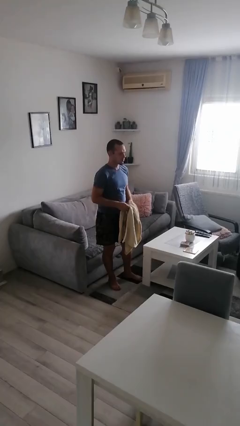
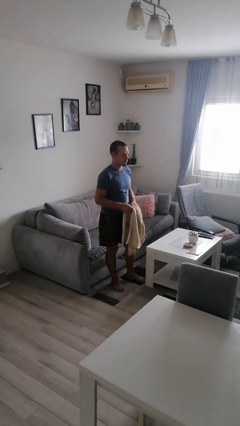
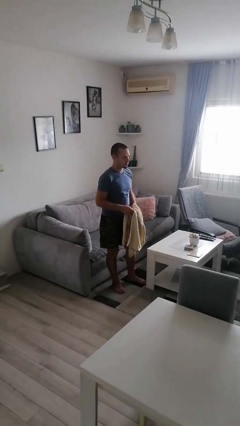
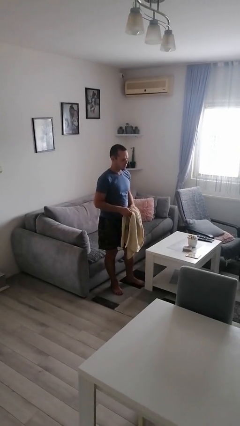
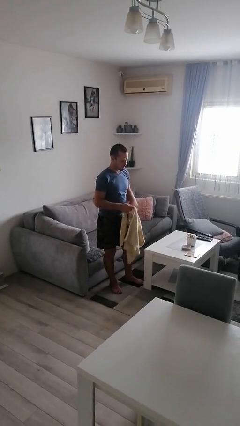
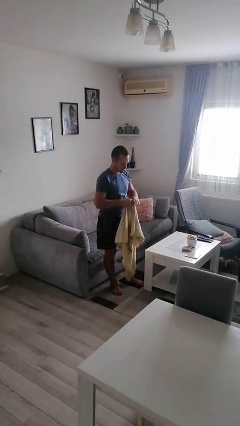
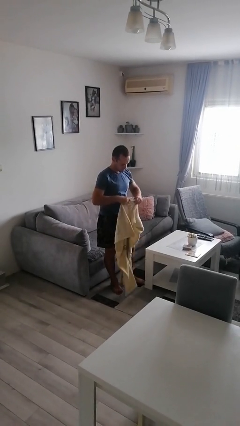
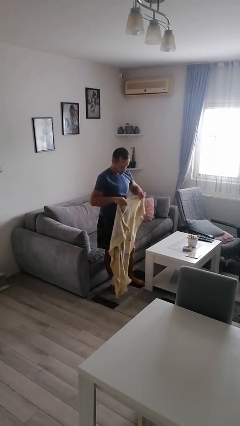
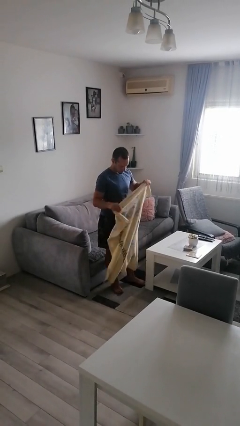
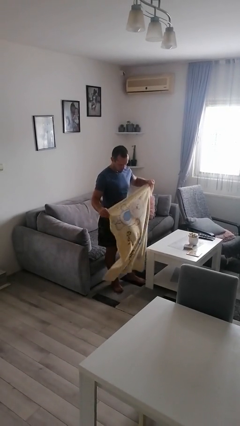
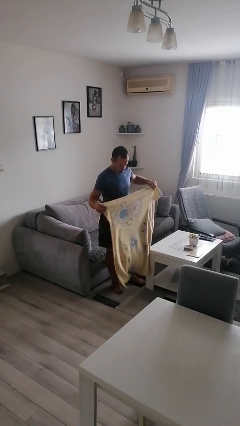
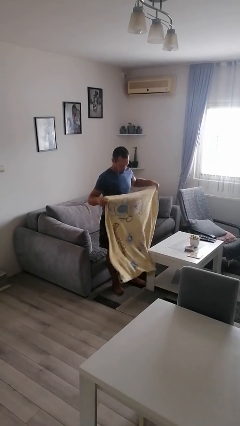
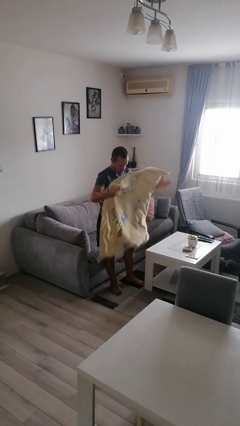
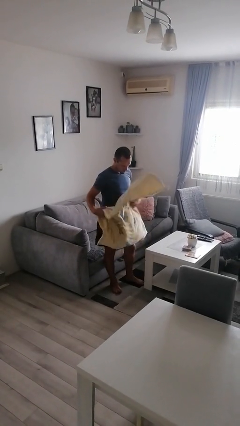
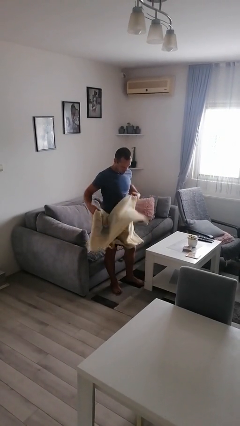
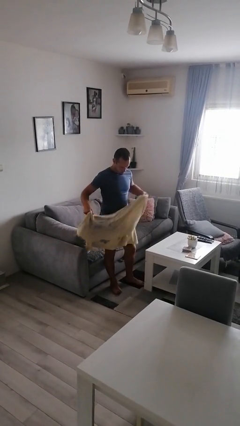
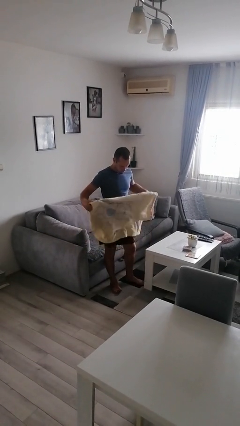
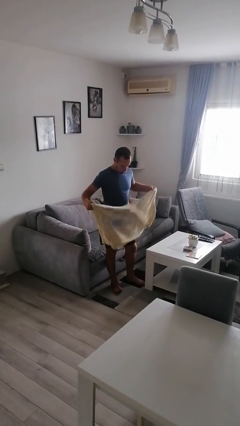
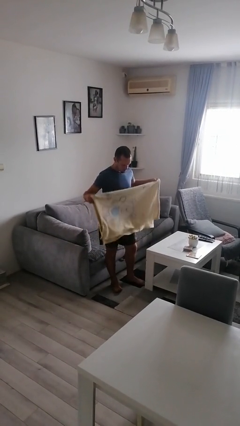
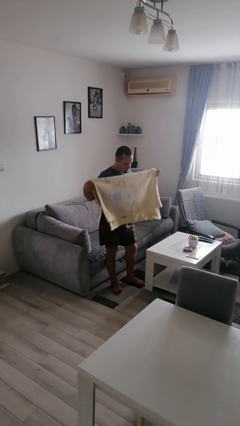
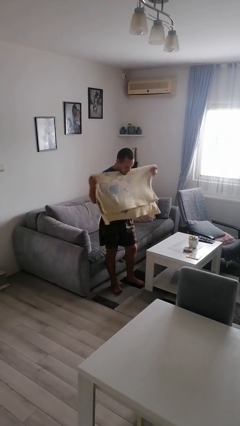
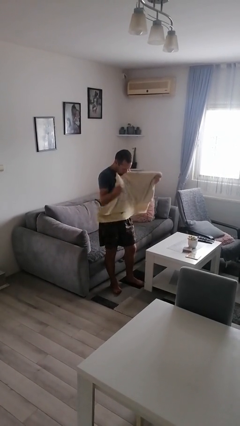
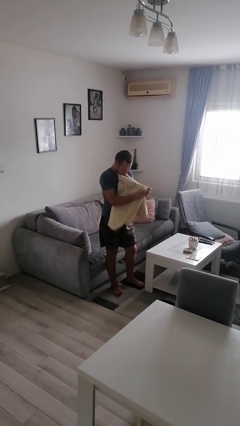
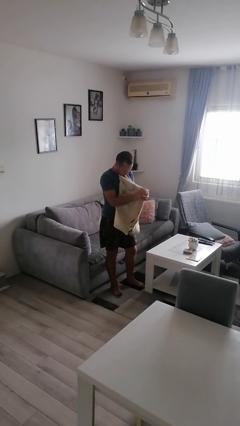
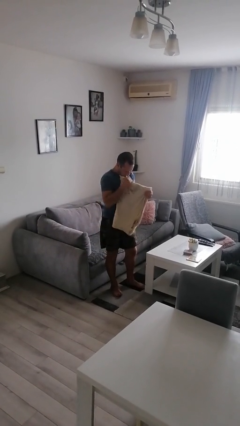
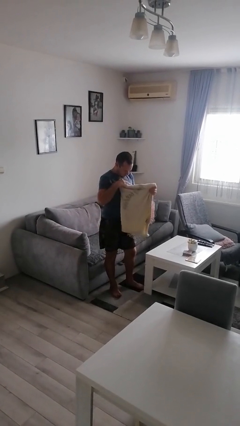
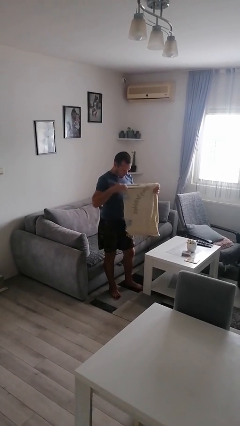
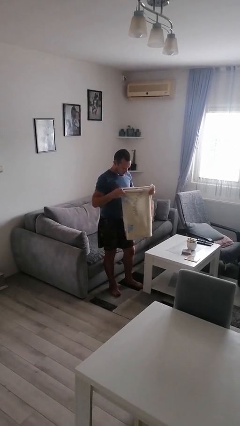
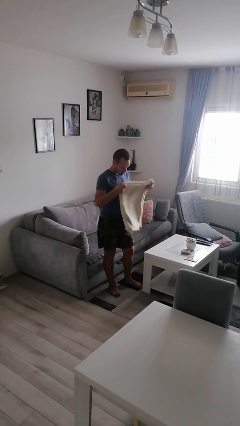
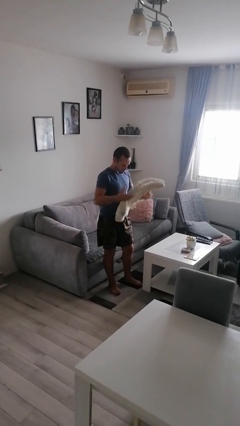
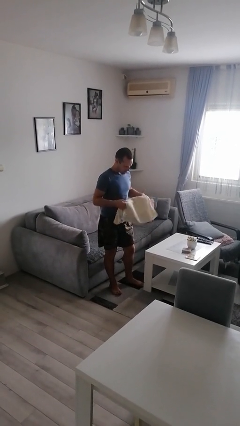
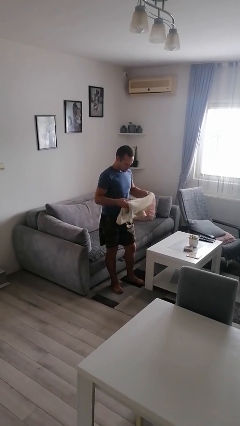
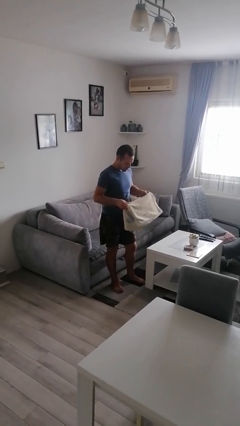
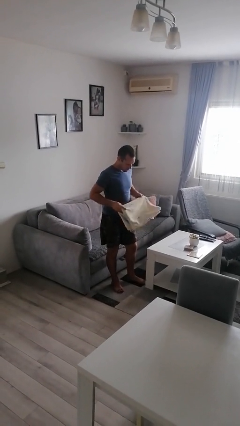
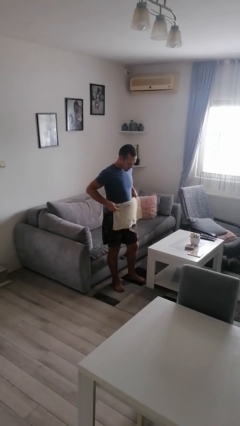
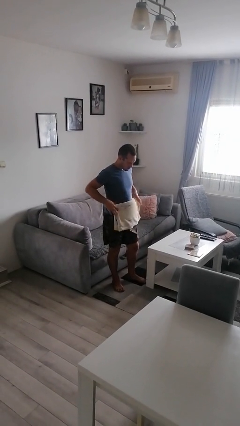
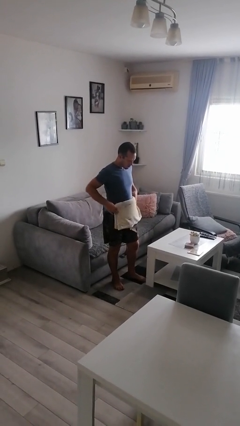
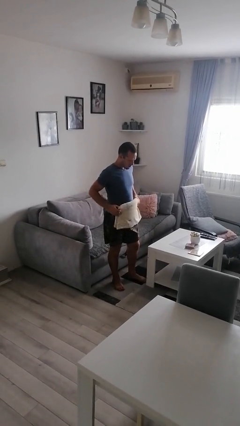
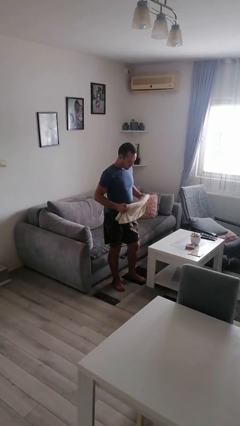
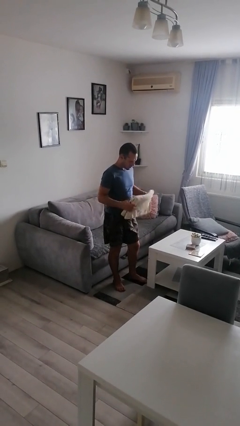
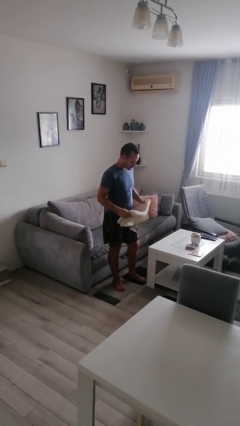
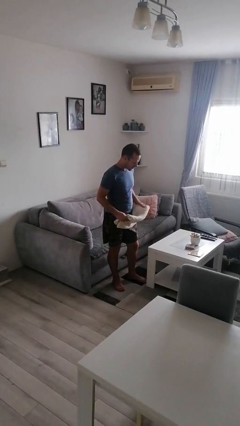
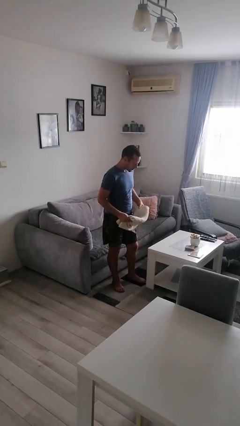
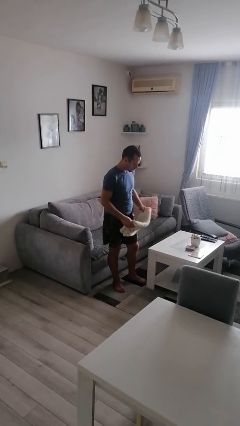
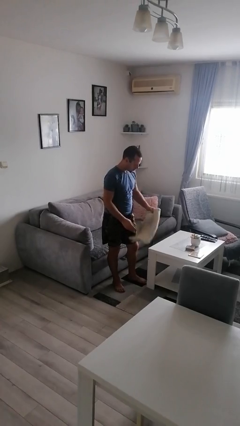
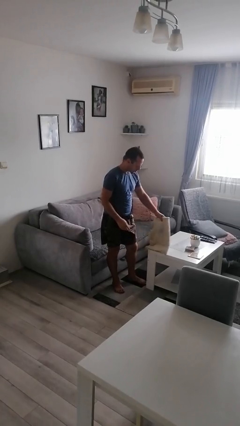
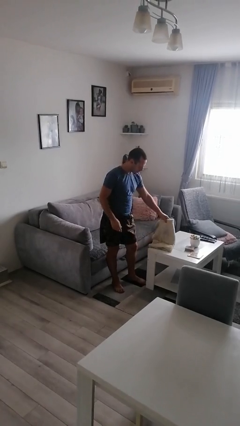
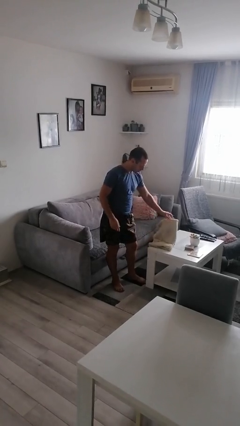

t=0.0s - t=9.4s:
person folds blanket

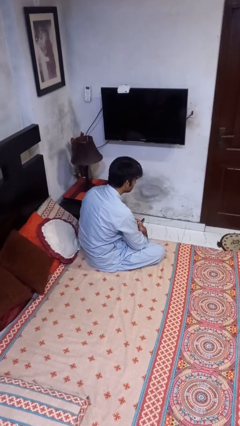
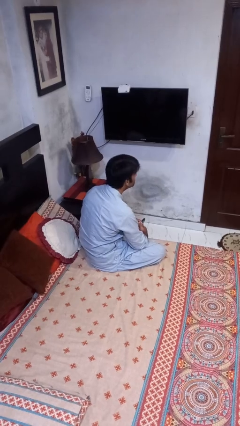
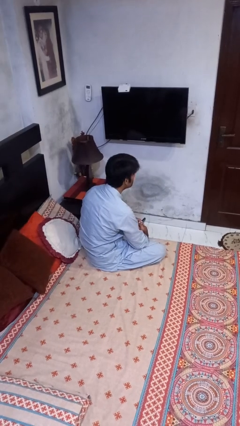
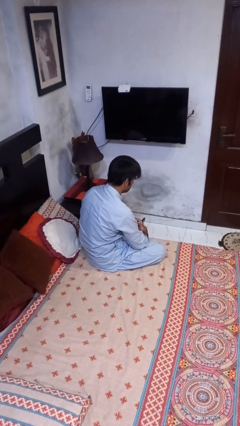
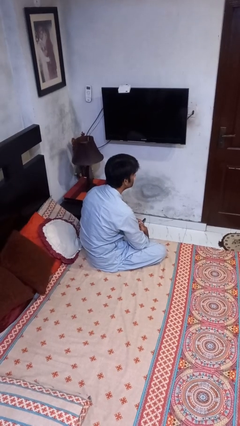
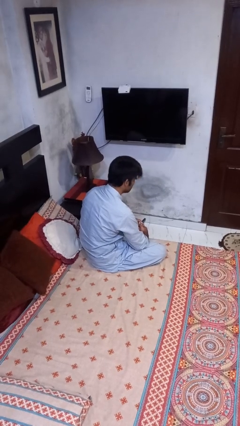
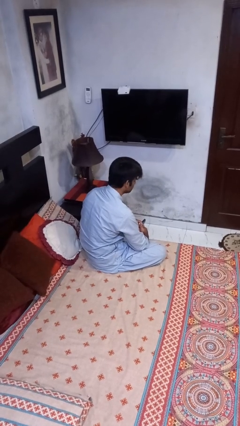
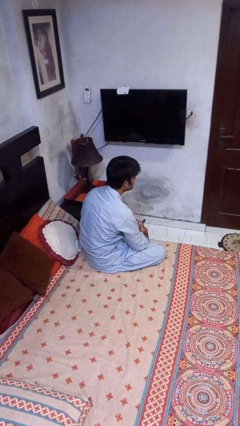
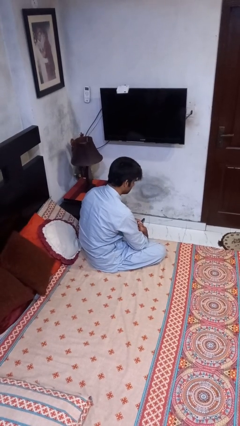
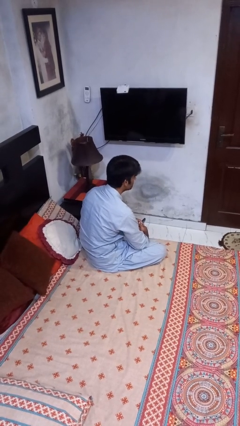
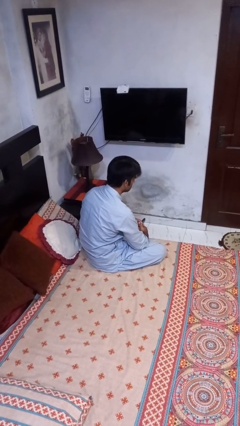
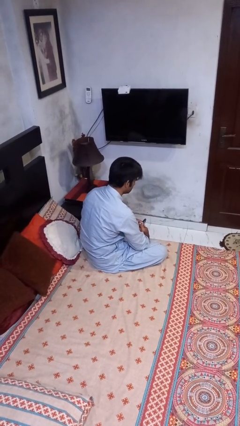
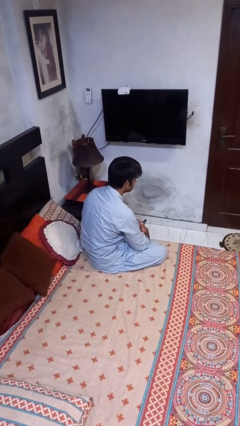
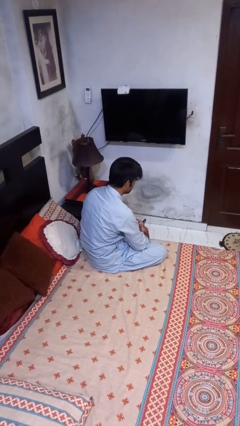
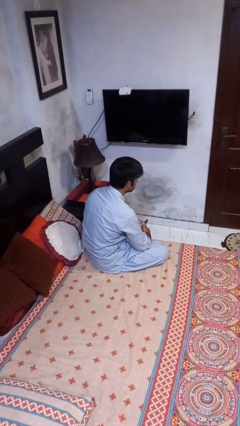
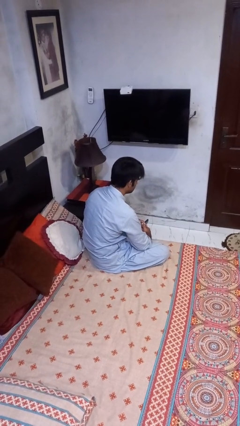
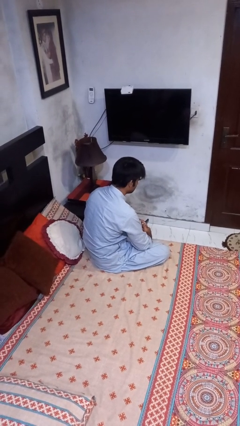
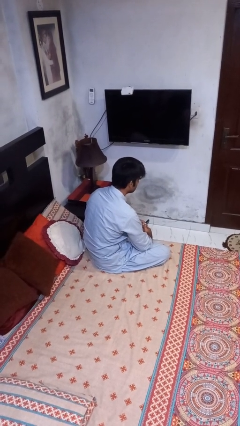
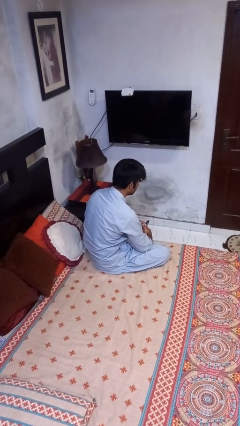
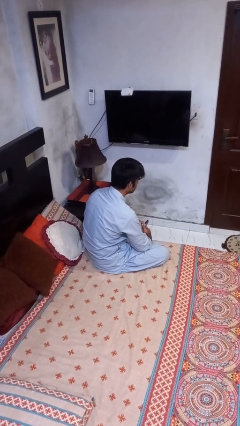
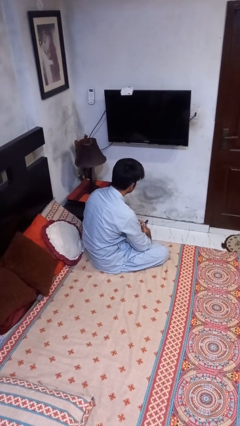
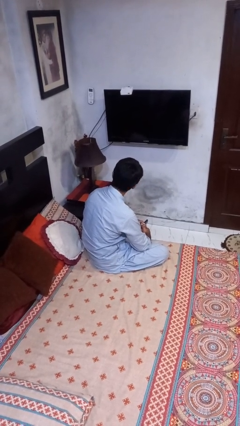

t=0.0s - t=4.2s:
person nods head

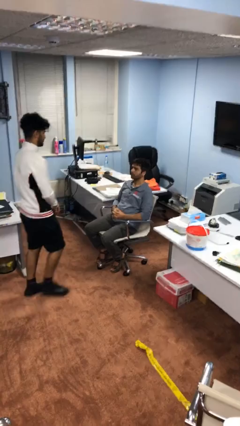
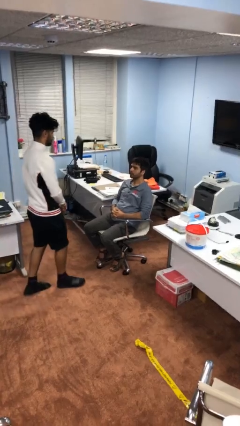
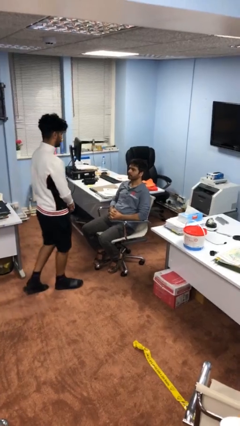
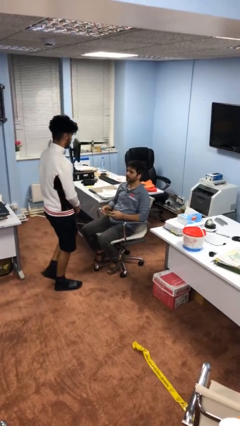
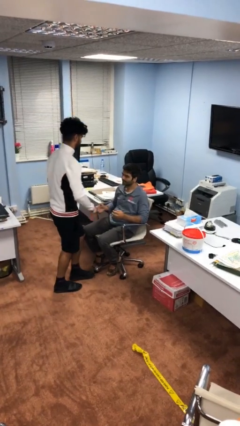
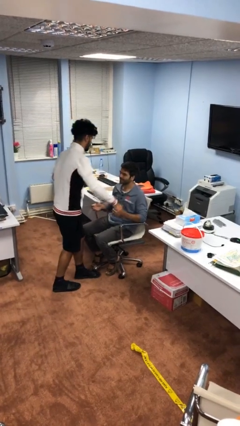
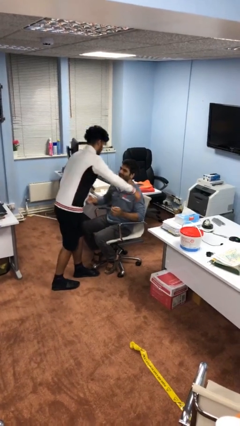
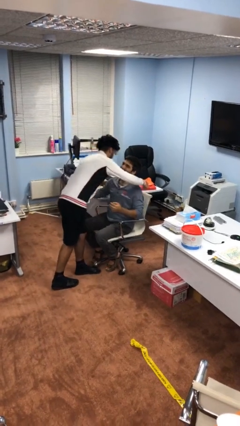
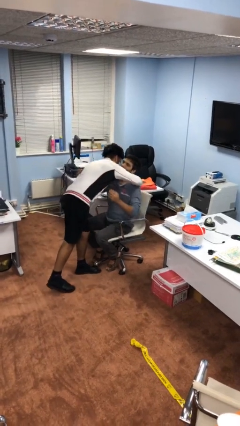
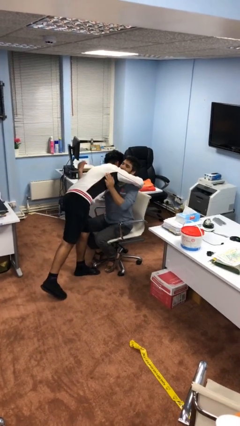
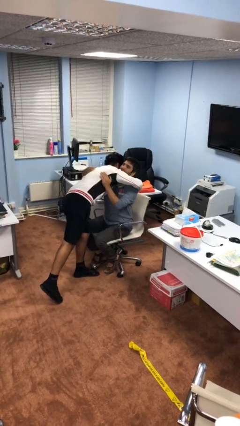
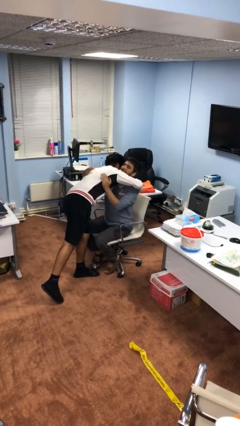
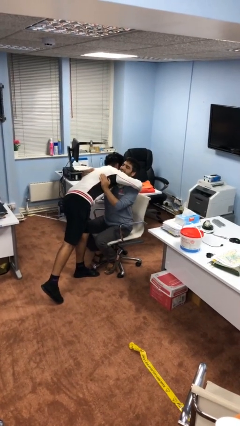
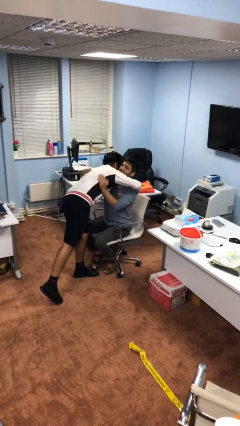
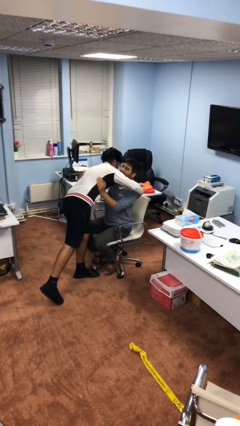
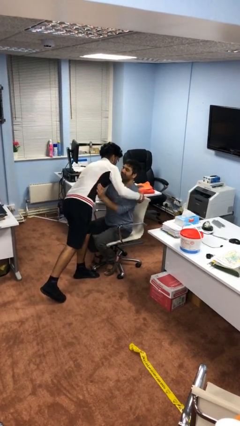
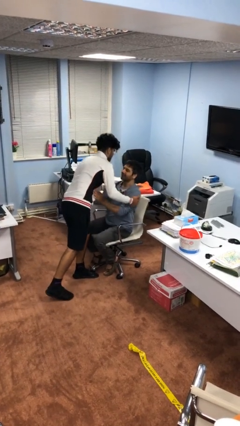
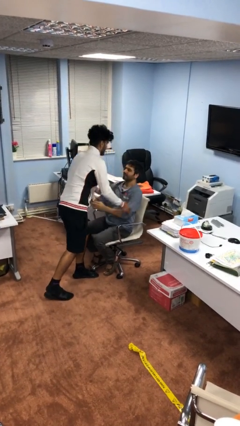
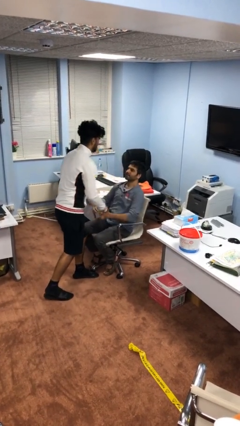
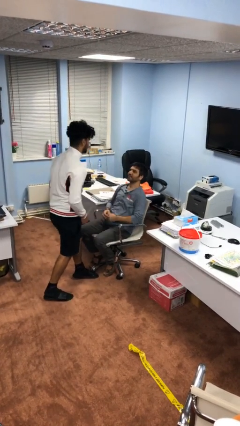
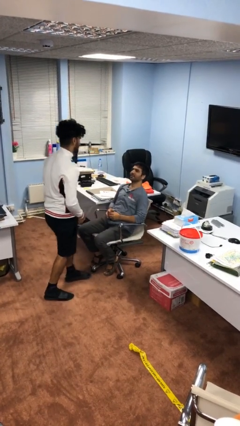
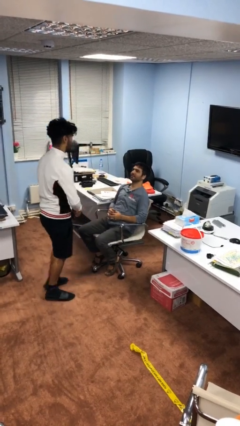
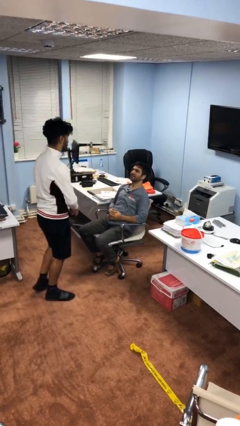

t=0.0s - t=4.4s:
person embraces person
